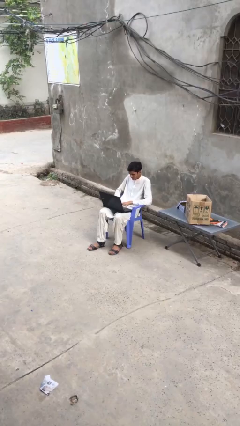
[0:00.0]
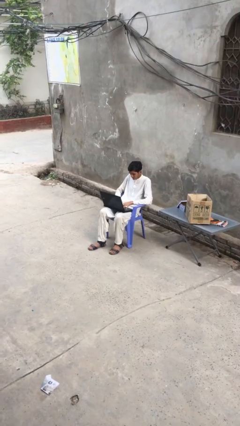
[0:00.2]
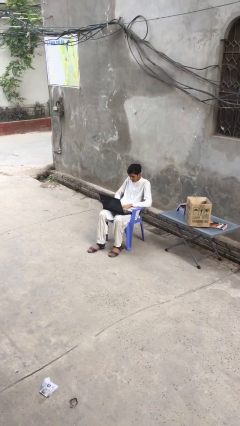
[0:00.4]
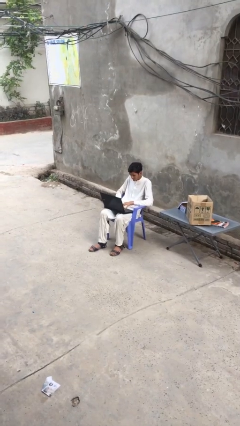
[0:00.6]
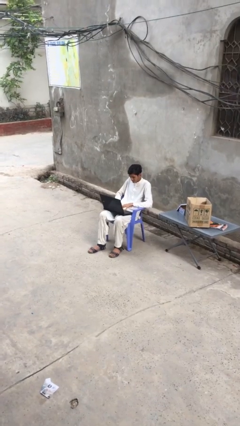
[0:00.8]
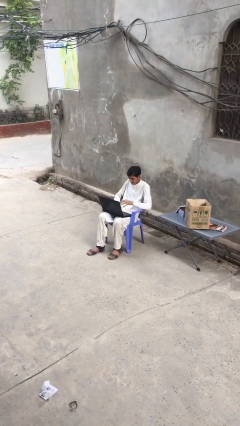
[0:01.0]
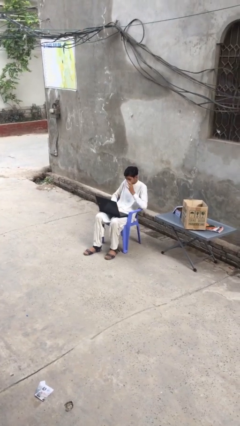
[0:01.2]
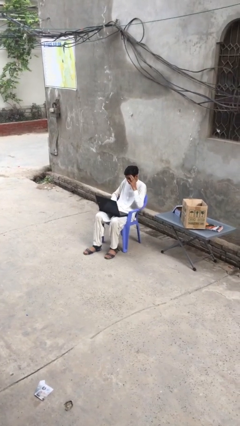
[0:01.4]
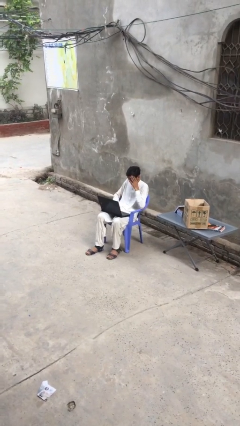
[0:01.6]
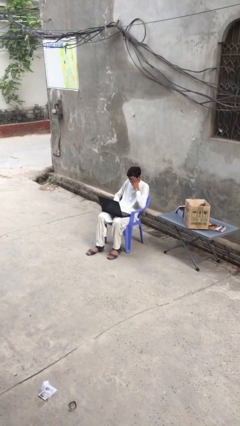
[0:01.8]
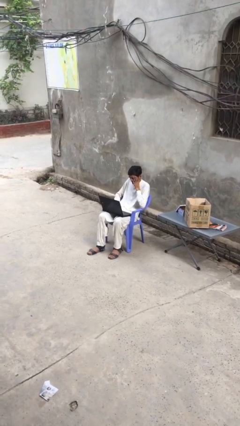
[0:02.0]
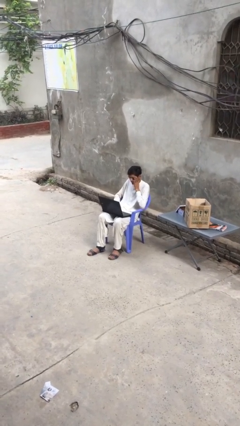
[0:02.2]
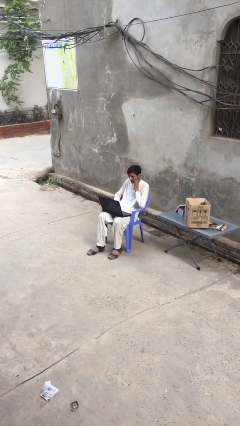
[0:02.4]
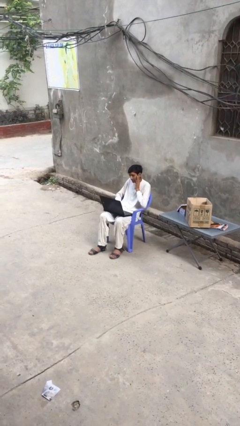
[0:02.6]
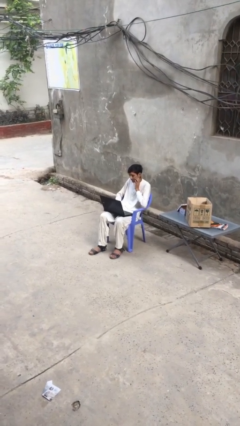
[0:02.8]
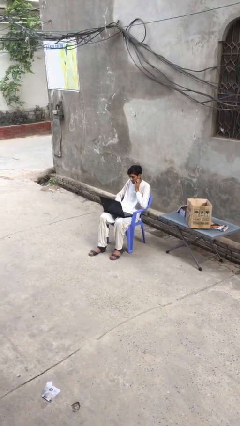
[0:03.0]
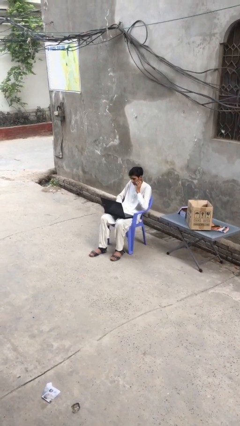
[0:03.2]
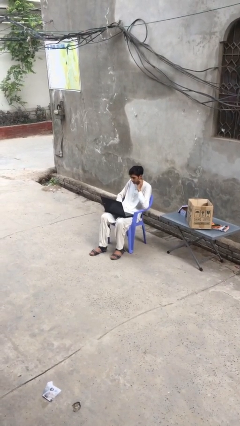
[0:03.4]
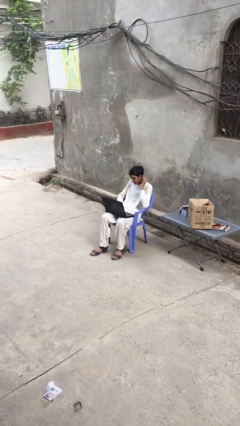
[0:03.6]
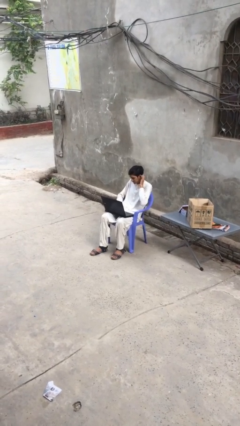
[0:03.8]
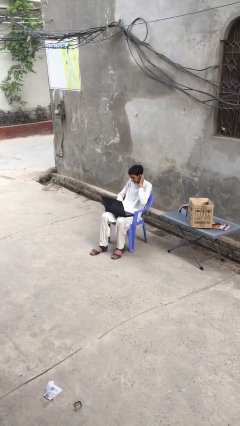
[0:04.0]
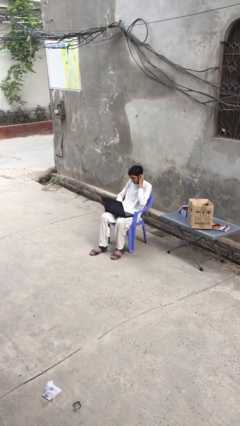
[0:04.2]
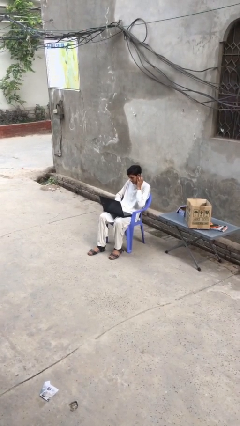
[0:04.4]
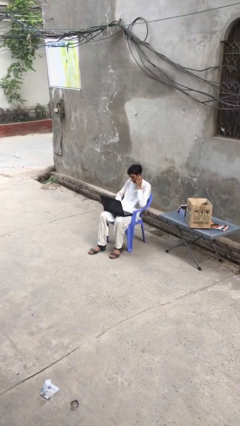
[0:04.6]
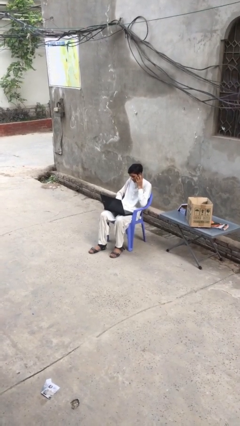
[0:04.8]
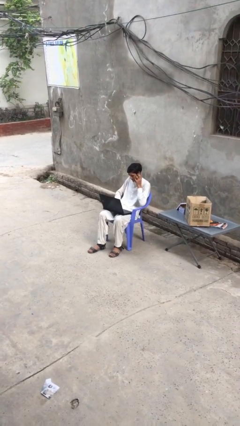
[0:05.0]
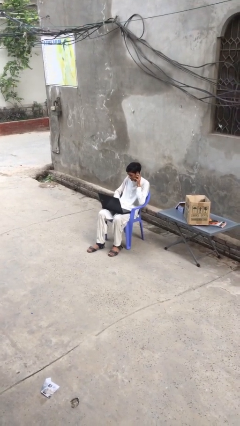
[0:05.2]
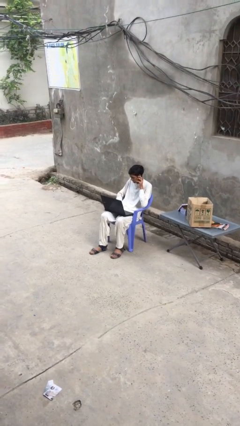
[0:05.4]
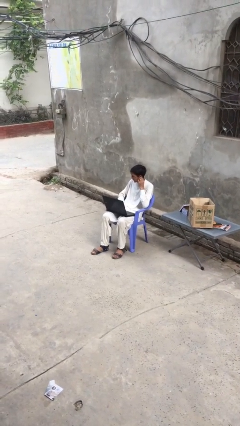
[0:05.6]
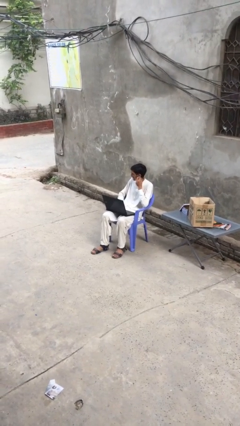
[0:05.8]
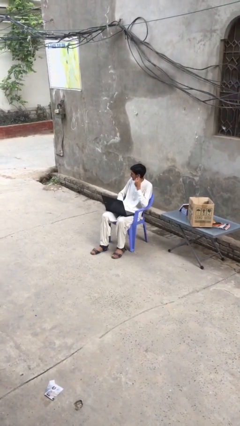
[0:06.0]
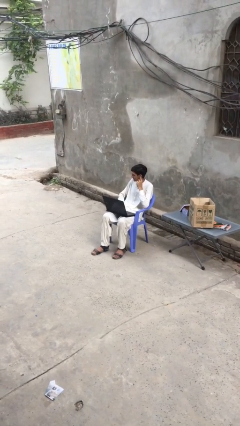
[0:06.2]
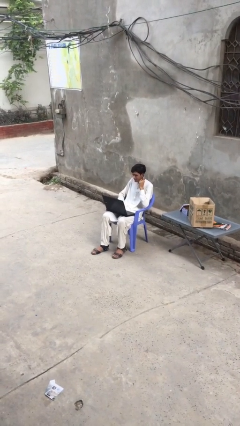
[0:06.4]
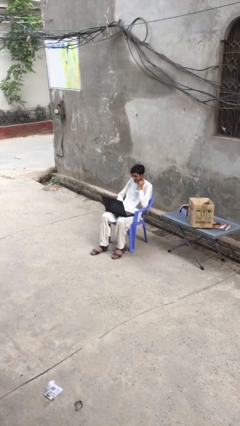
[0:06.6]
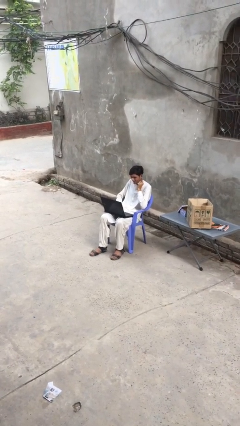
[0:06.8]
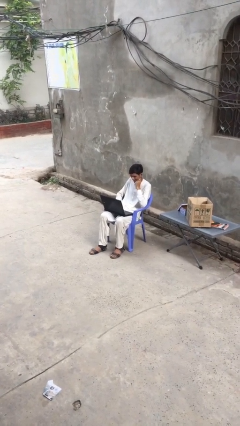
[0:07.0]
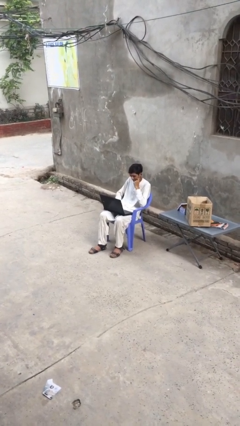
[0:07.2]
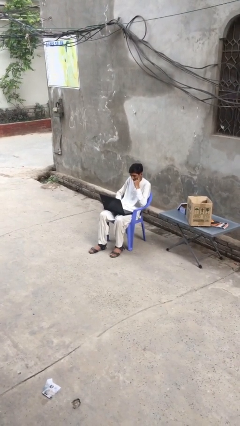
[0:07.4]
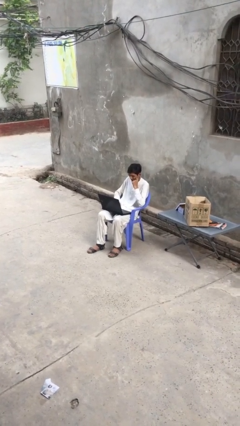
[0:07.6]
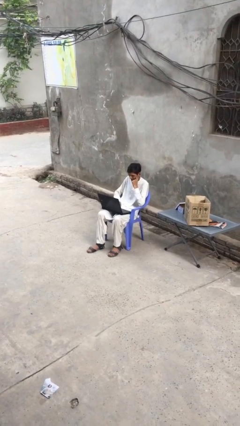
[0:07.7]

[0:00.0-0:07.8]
person interacts with laptop

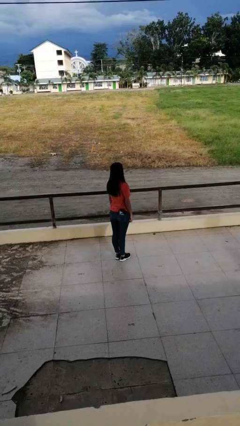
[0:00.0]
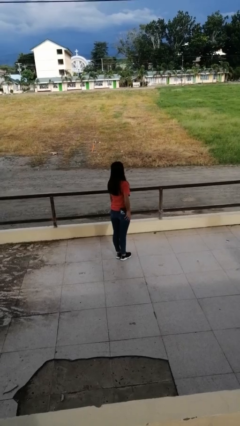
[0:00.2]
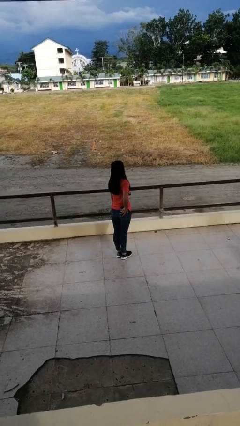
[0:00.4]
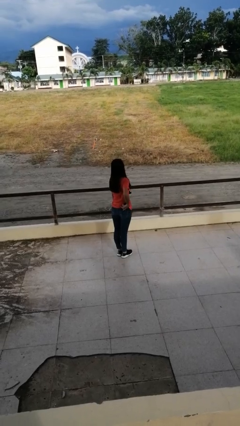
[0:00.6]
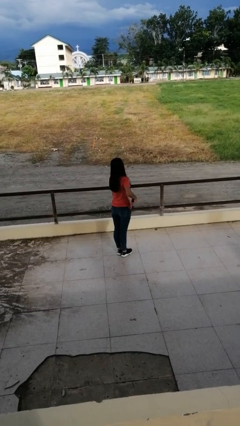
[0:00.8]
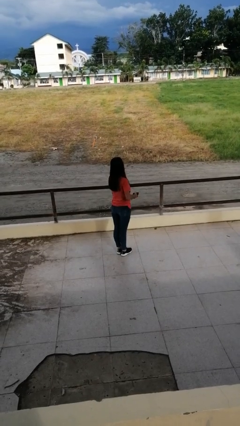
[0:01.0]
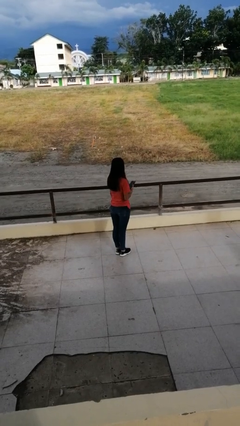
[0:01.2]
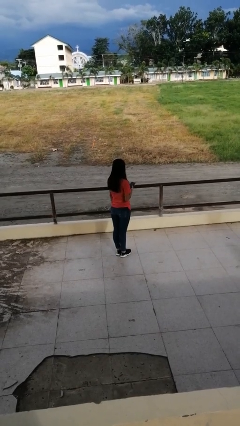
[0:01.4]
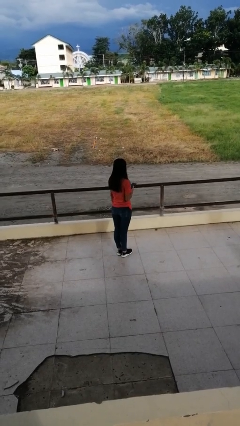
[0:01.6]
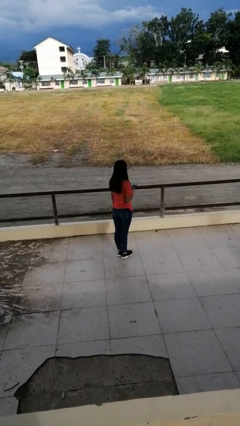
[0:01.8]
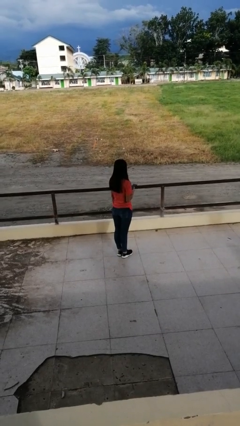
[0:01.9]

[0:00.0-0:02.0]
person takes phone from pocket

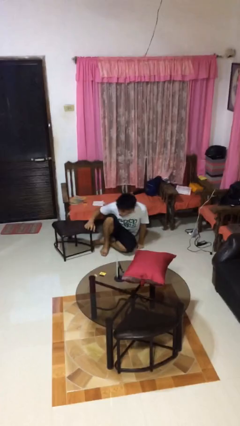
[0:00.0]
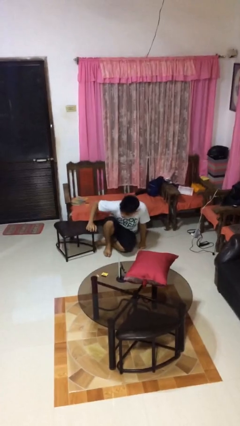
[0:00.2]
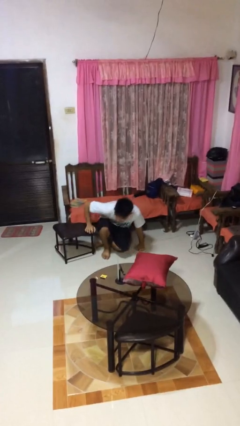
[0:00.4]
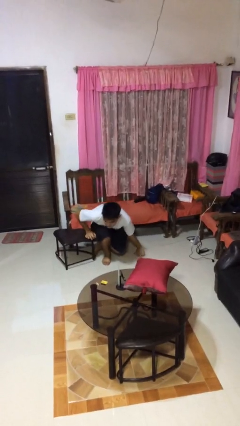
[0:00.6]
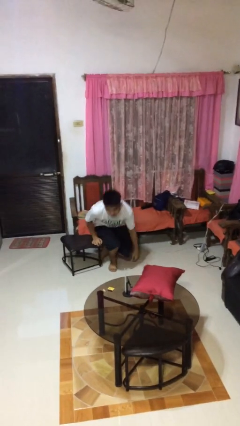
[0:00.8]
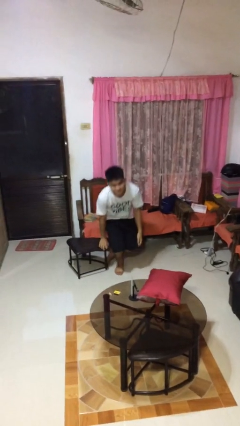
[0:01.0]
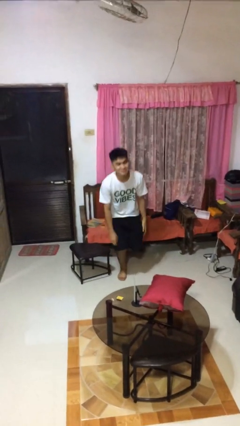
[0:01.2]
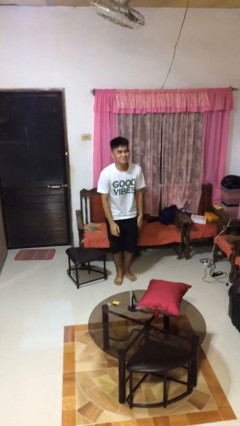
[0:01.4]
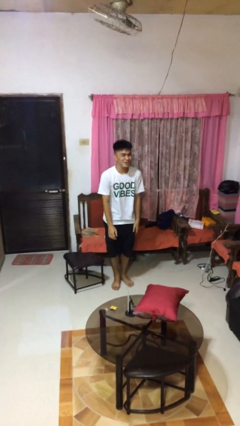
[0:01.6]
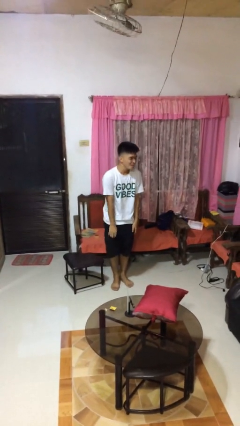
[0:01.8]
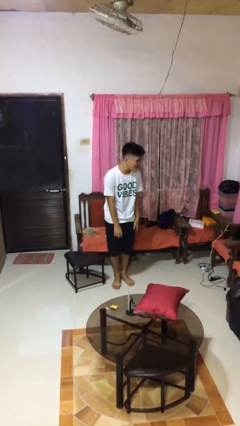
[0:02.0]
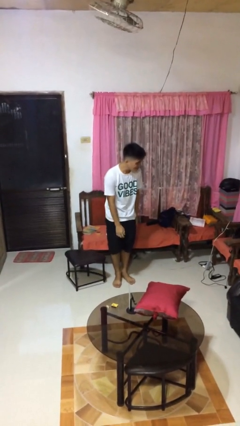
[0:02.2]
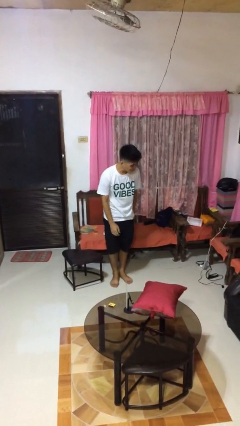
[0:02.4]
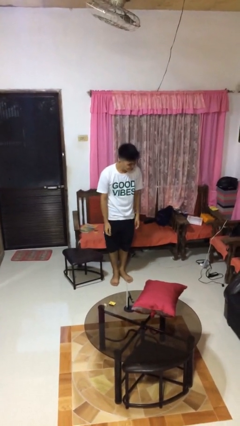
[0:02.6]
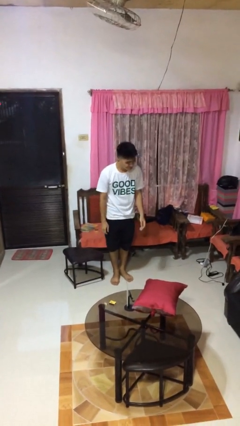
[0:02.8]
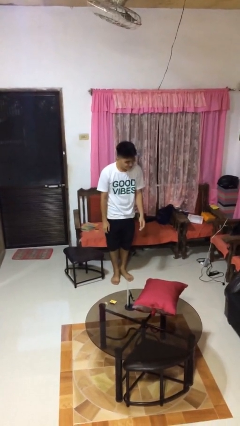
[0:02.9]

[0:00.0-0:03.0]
person stands up from floor

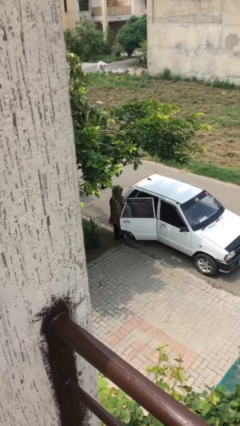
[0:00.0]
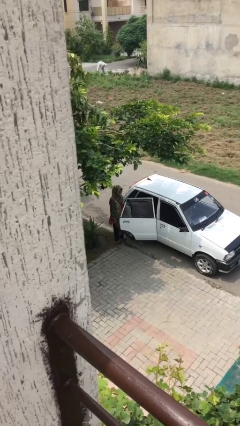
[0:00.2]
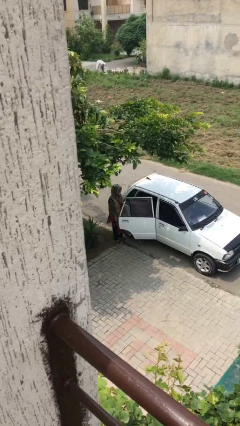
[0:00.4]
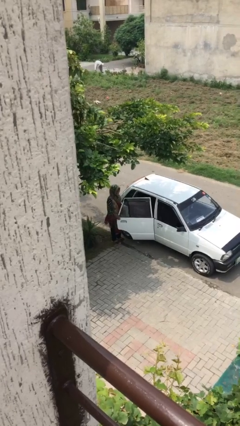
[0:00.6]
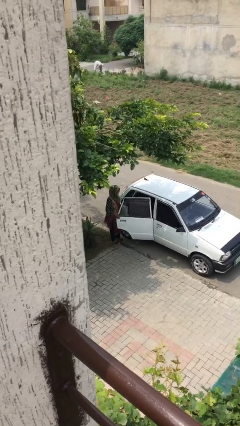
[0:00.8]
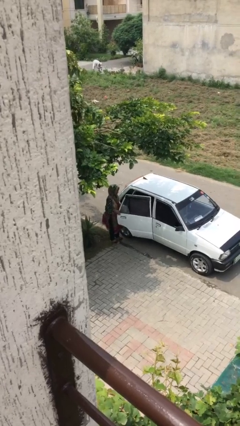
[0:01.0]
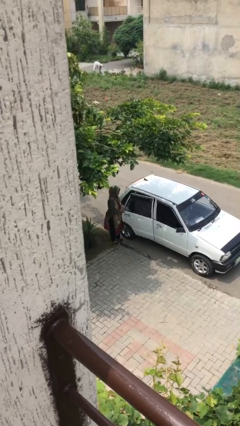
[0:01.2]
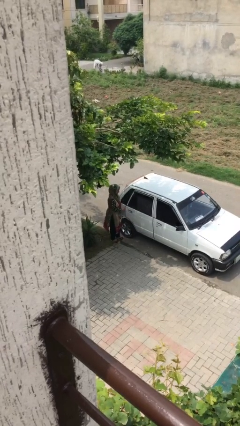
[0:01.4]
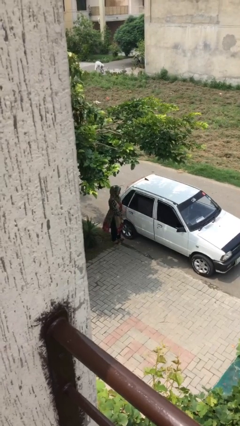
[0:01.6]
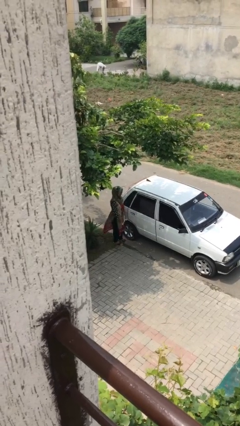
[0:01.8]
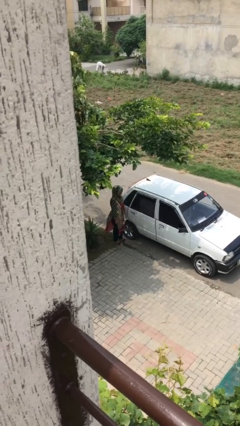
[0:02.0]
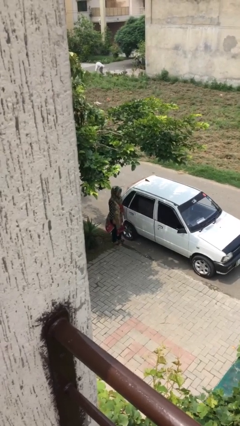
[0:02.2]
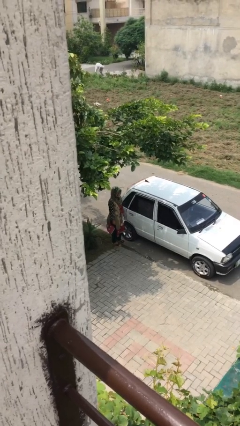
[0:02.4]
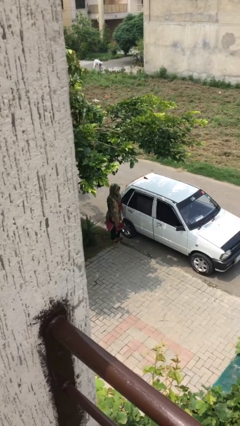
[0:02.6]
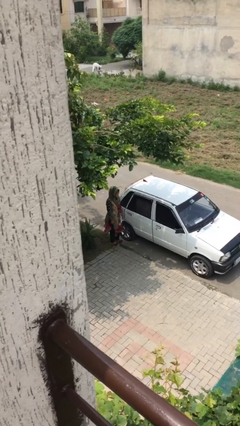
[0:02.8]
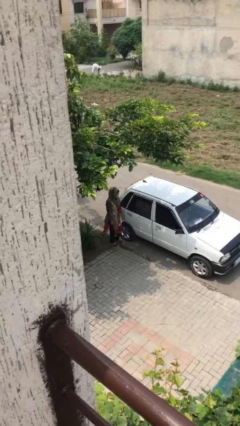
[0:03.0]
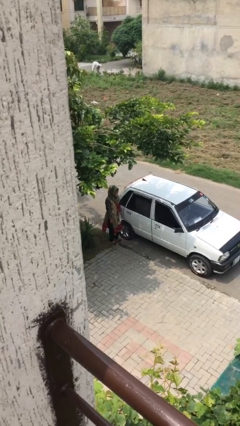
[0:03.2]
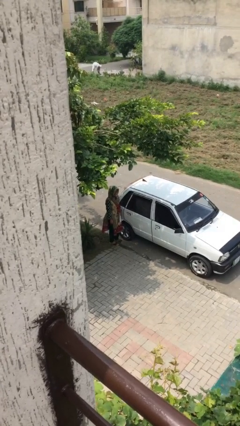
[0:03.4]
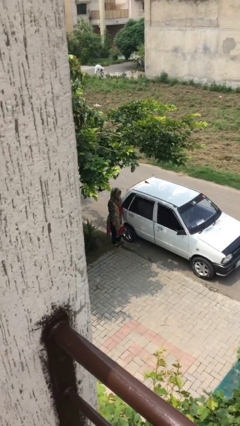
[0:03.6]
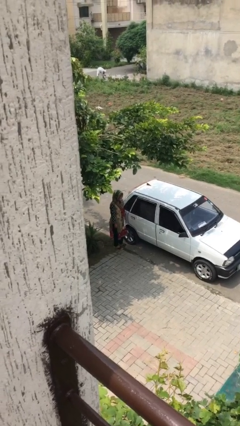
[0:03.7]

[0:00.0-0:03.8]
person closes car door

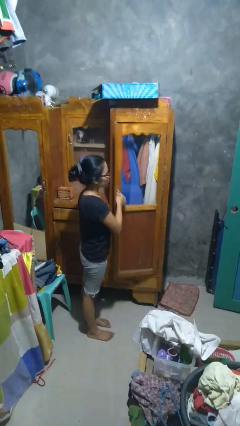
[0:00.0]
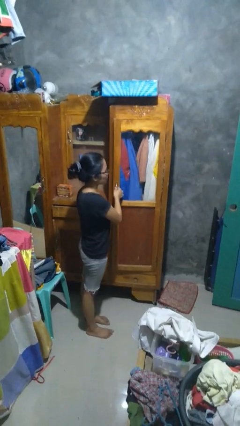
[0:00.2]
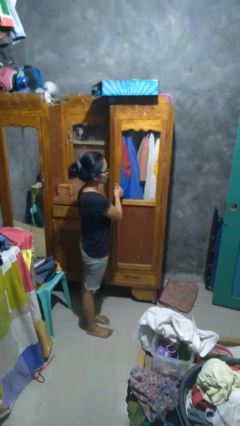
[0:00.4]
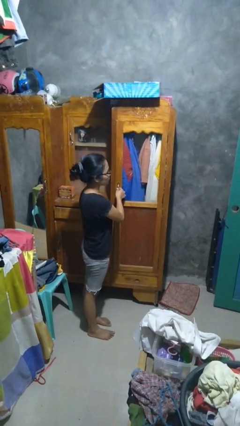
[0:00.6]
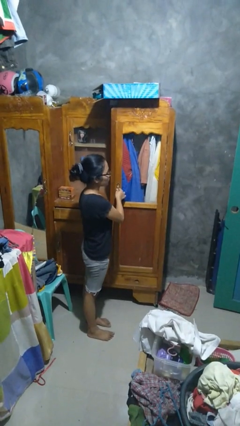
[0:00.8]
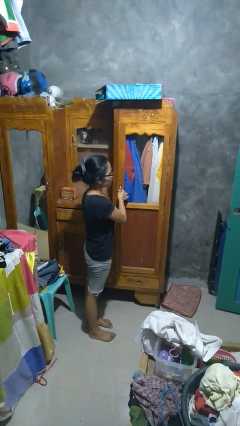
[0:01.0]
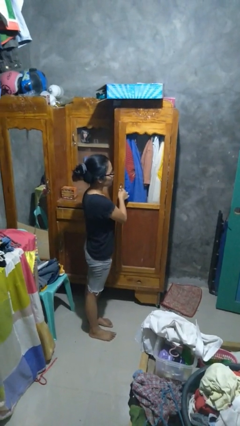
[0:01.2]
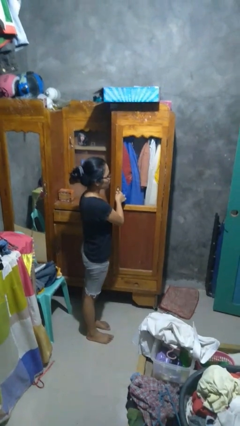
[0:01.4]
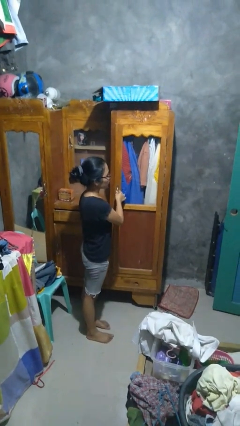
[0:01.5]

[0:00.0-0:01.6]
person closes closet door
